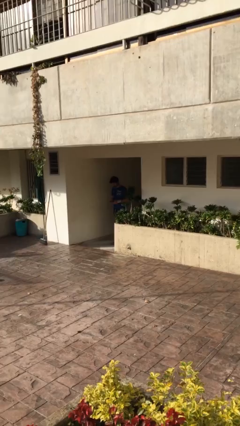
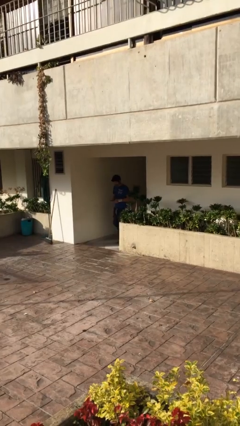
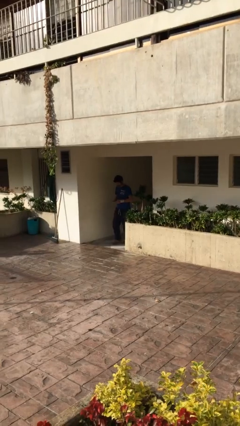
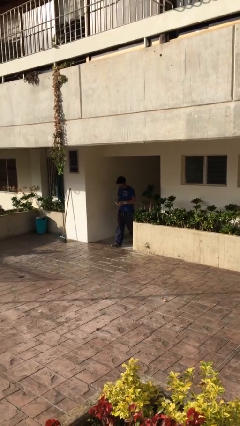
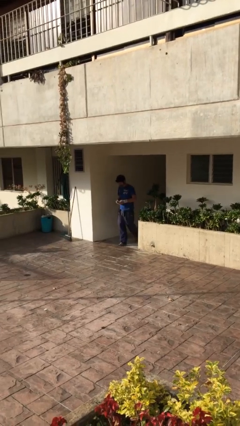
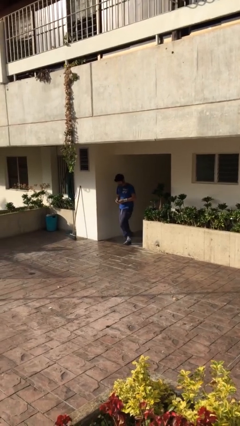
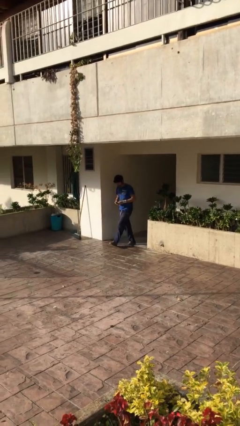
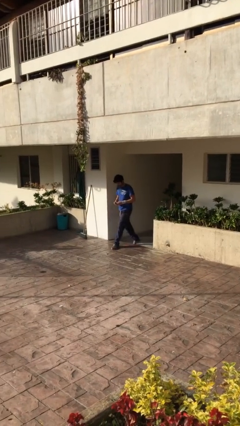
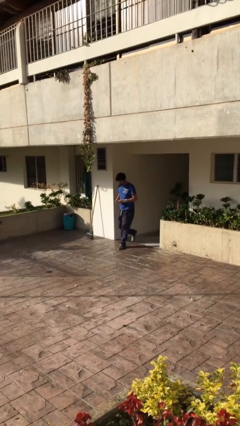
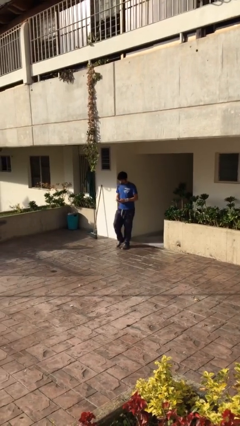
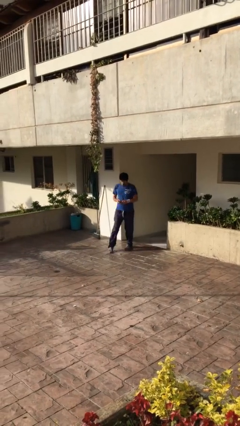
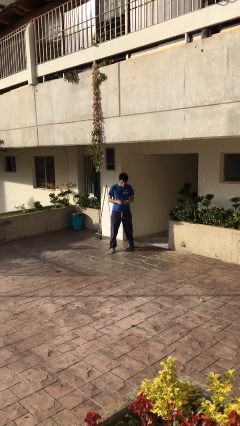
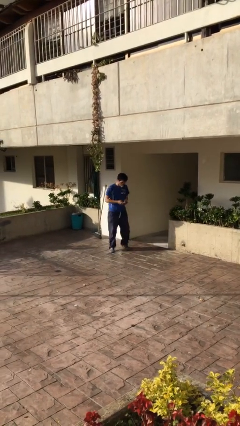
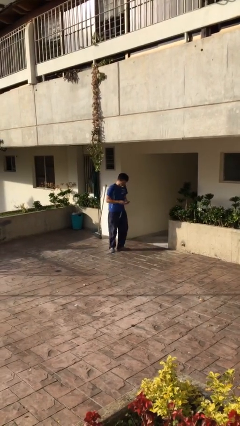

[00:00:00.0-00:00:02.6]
person enters scene through structure

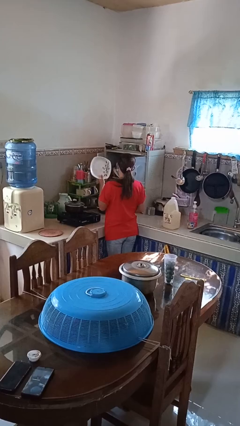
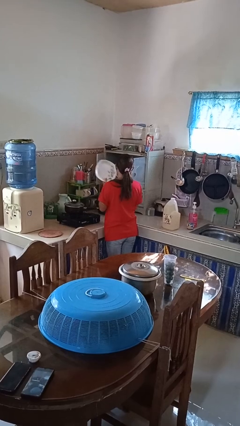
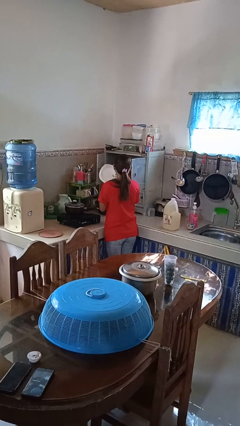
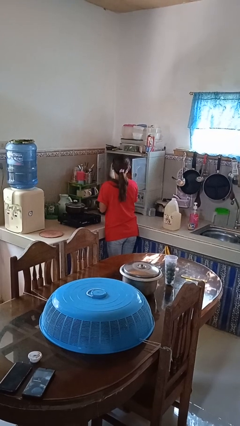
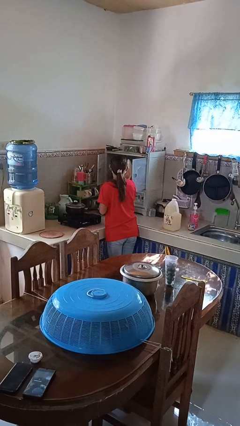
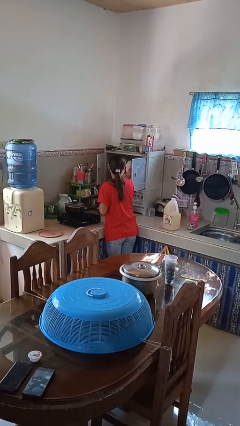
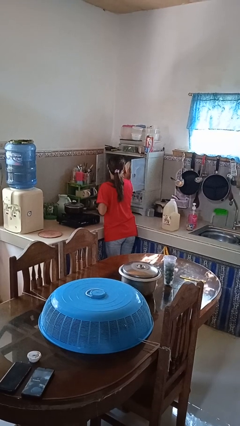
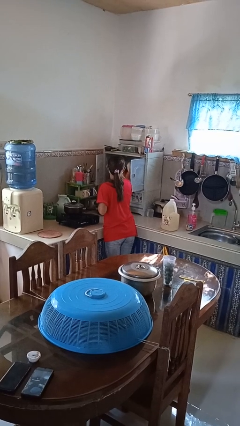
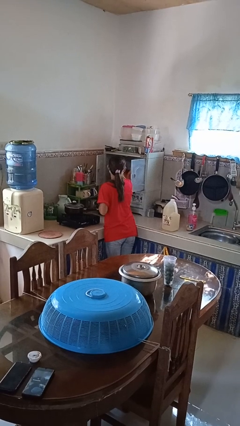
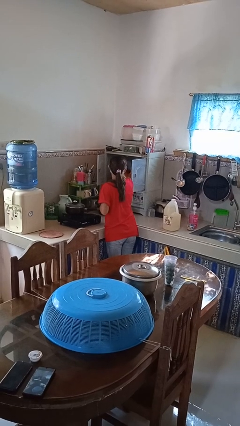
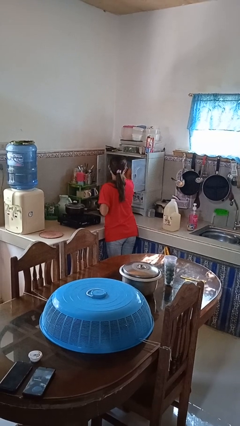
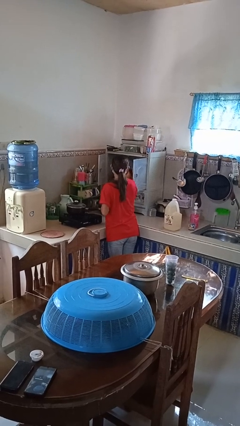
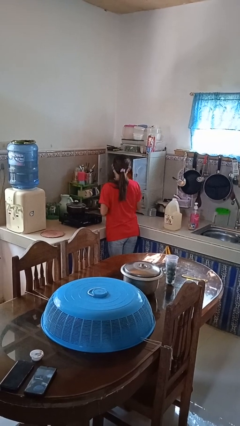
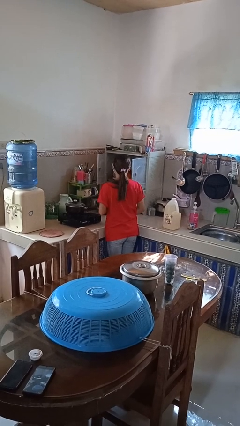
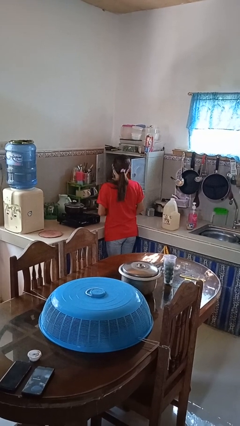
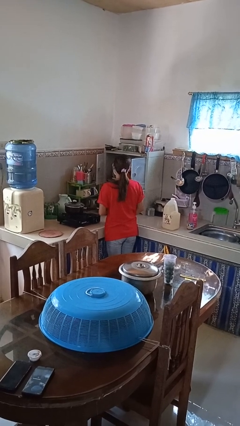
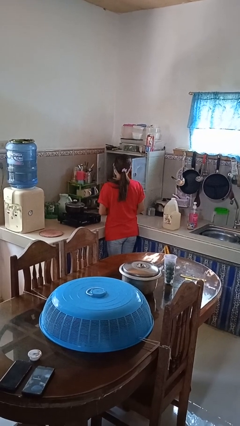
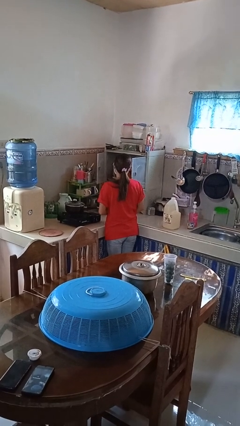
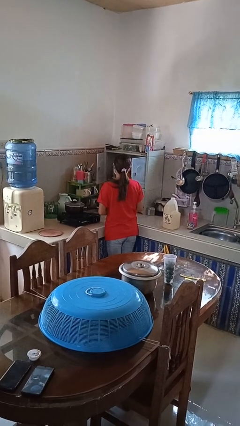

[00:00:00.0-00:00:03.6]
person puts object in cabinet

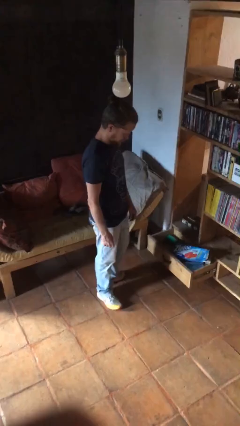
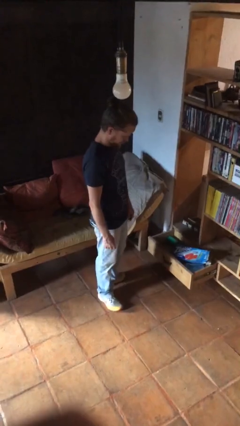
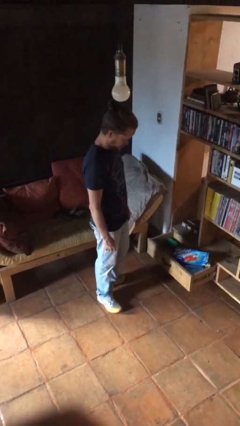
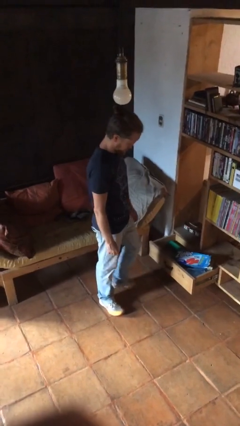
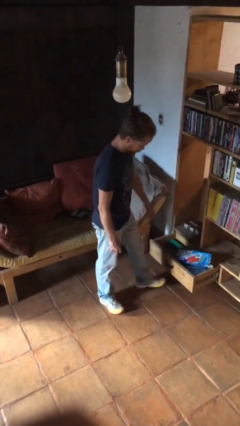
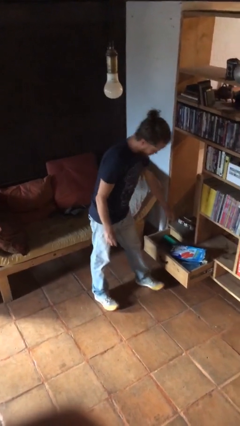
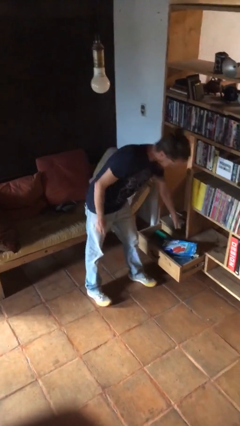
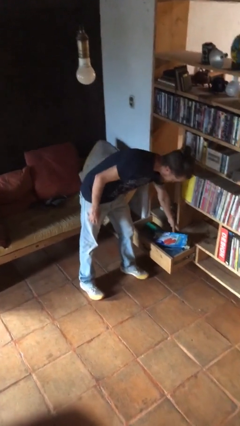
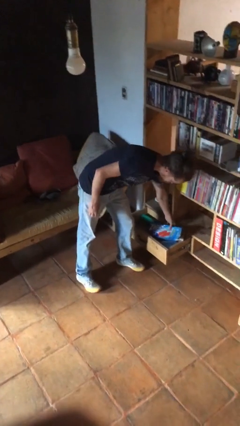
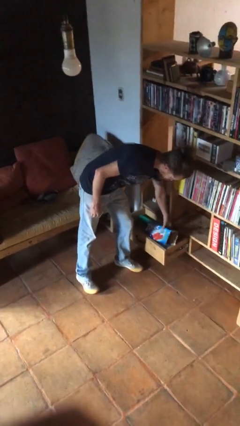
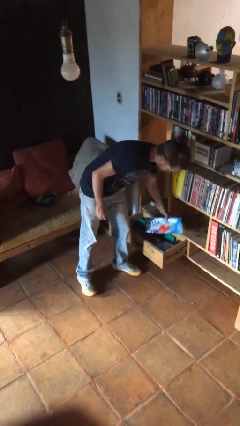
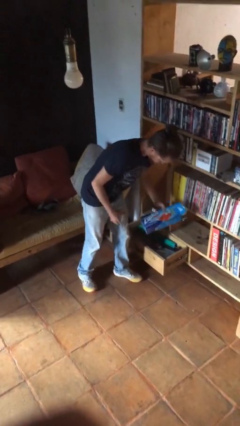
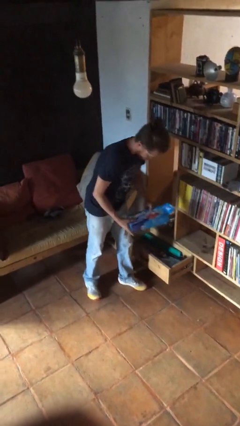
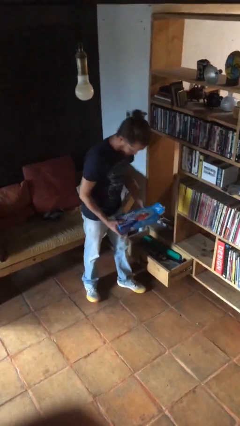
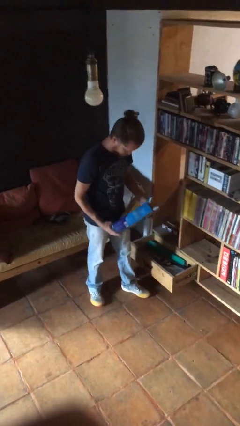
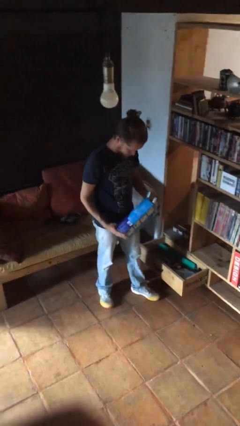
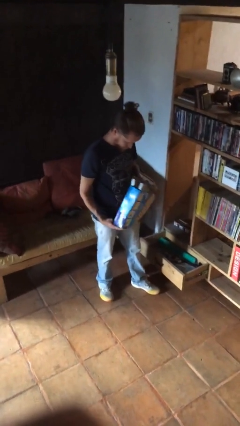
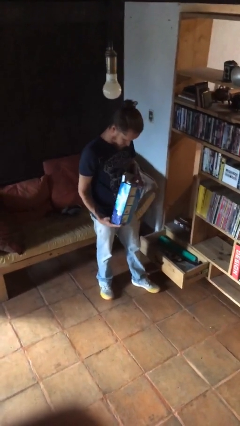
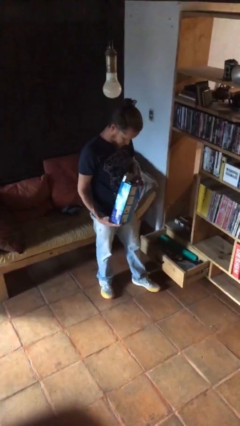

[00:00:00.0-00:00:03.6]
person picks up object from cabinet

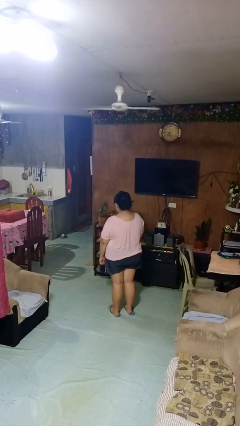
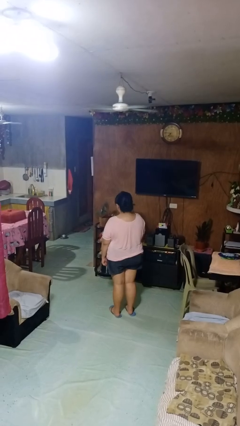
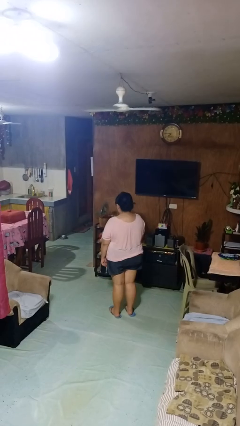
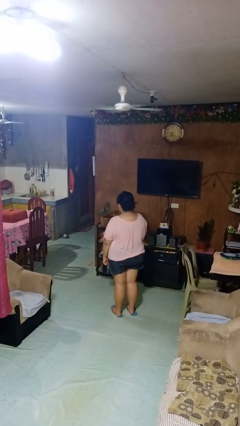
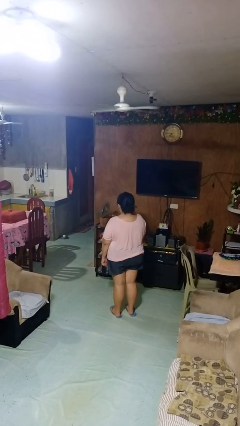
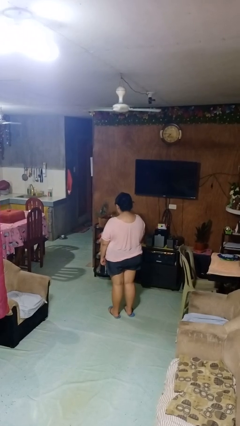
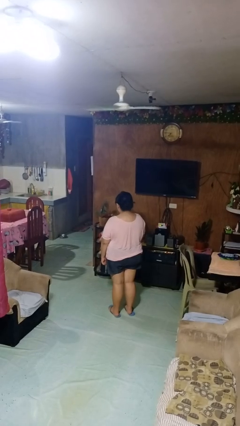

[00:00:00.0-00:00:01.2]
person nods head

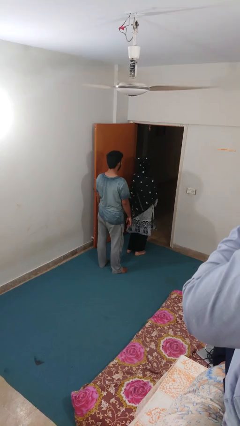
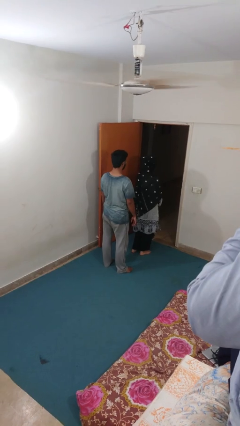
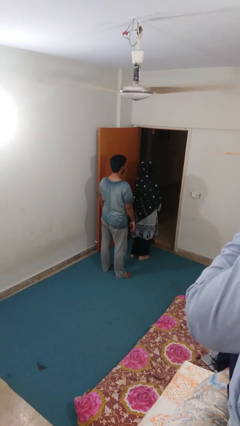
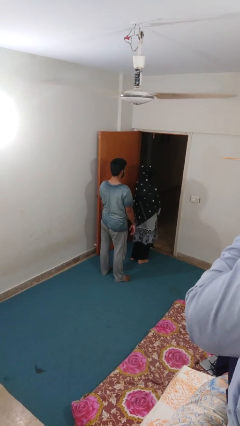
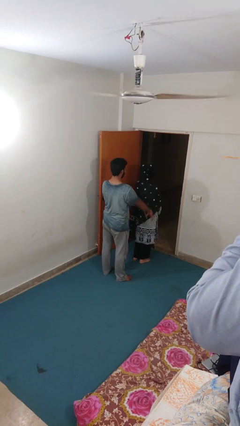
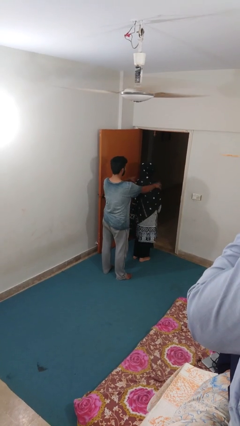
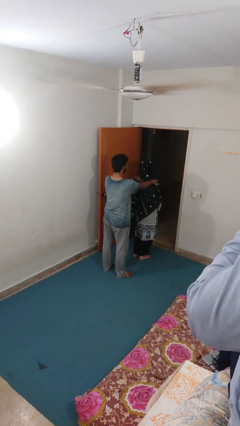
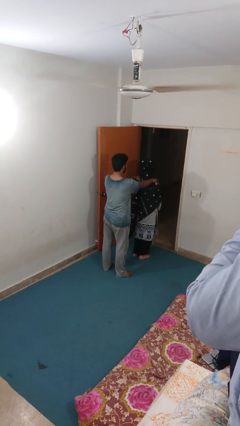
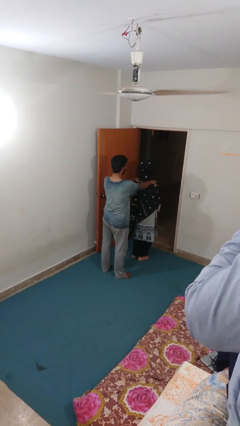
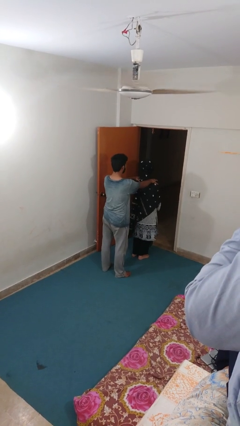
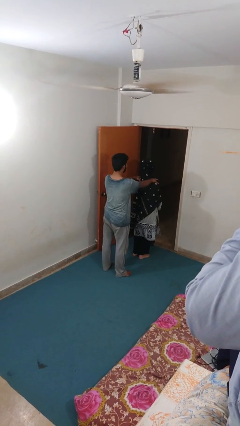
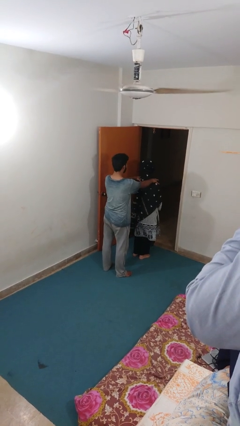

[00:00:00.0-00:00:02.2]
person grabs person by shoulder

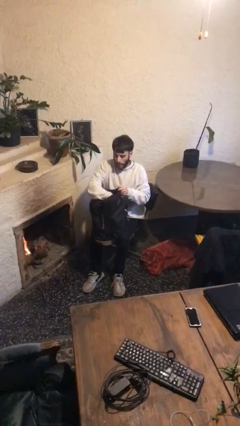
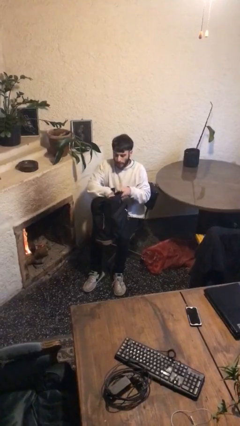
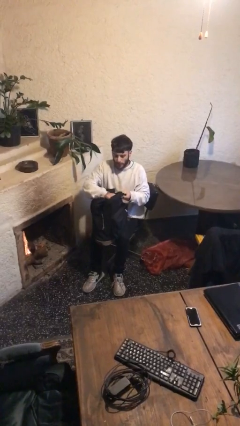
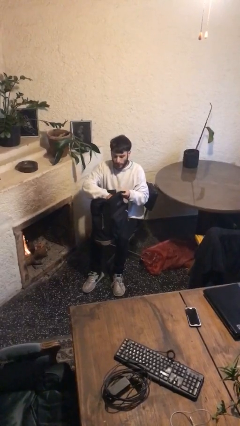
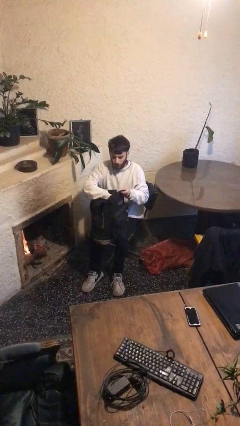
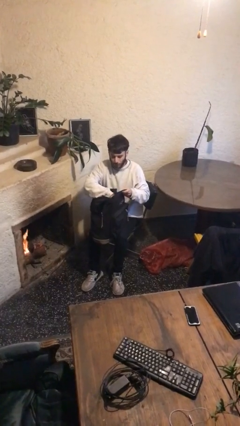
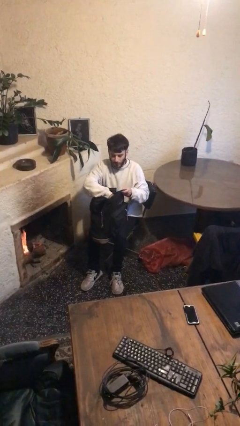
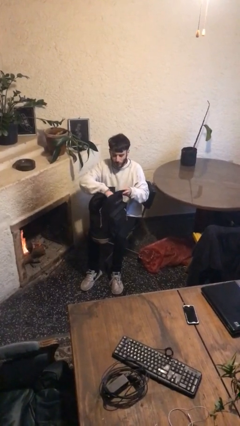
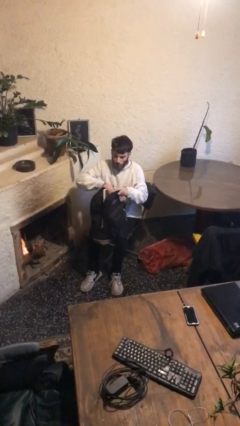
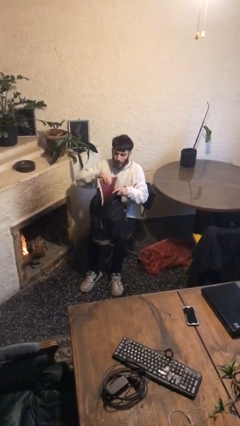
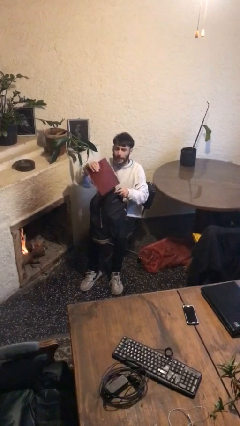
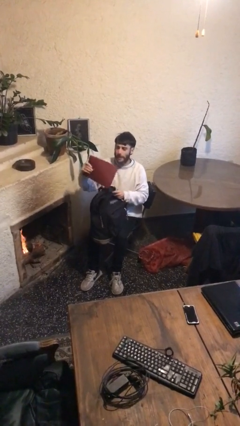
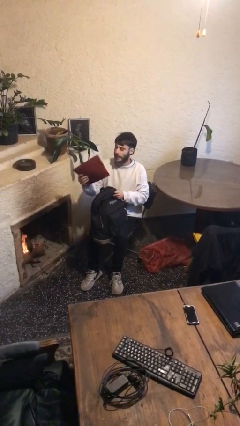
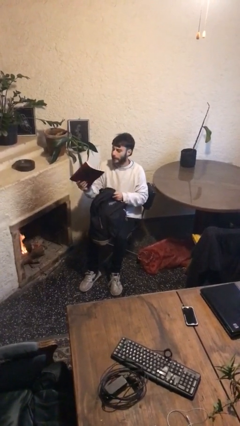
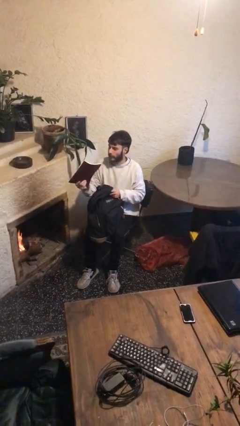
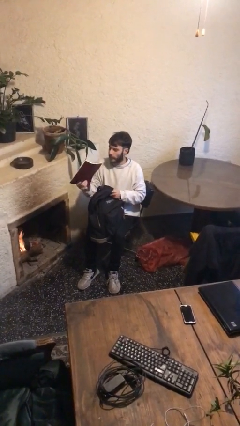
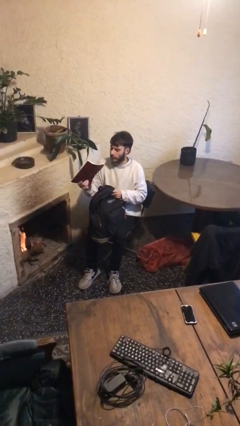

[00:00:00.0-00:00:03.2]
person takes object from backpack

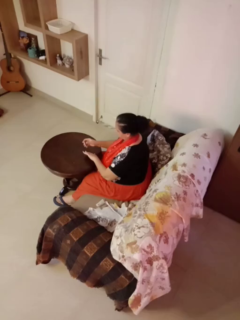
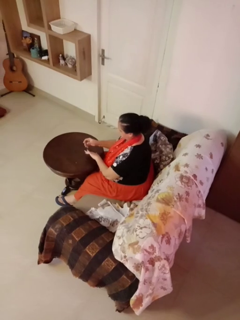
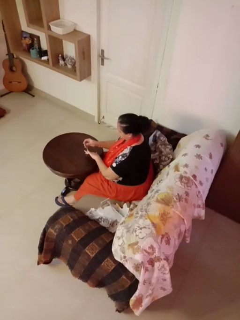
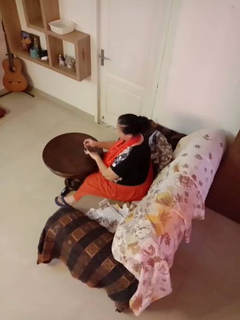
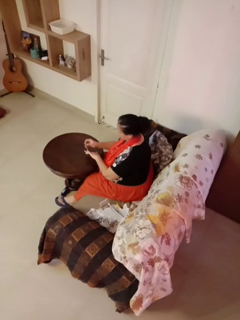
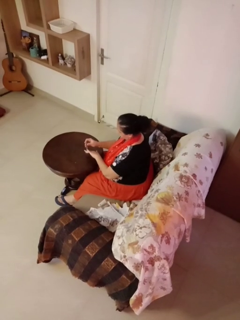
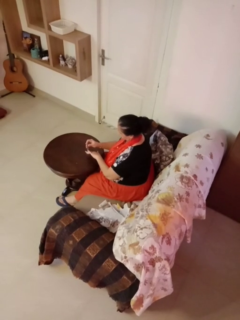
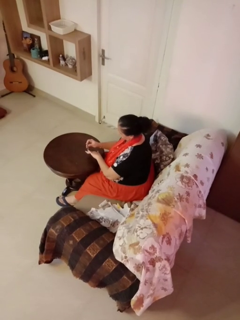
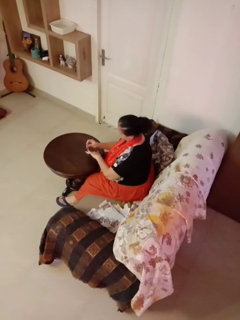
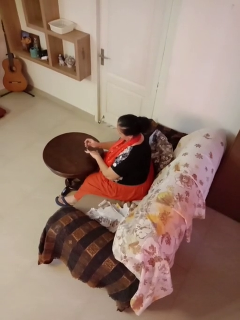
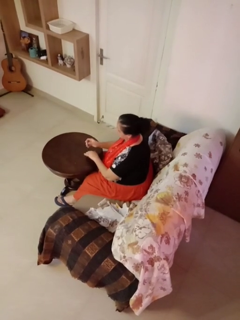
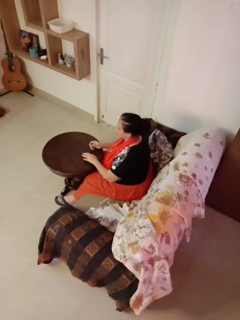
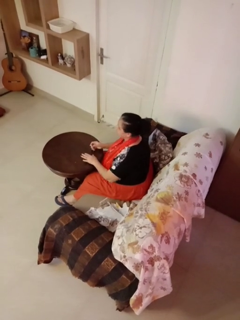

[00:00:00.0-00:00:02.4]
person clips fingernails
